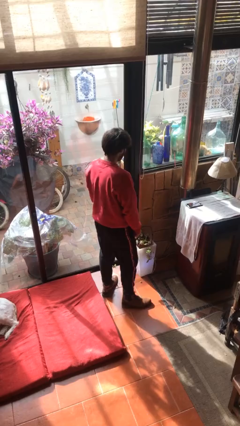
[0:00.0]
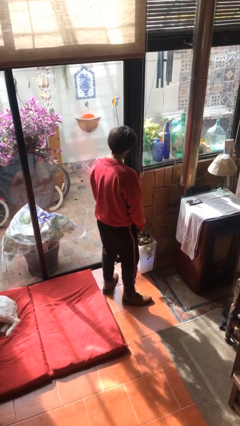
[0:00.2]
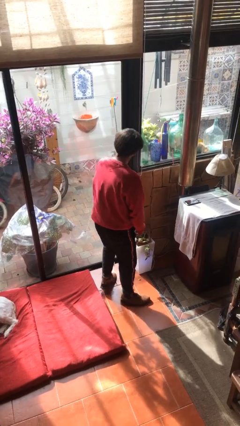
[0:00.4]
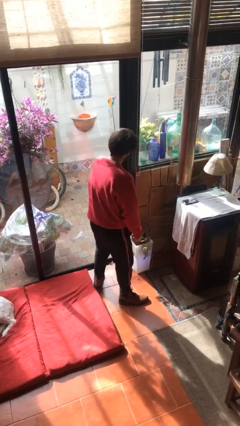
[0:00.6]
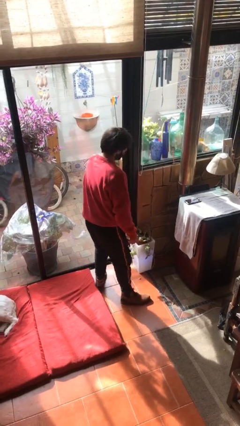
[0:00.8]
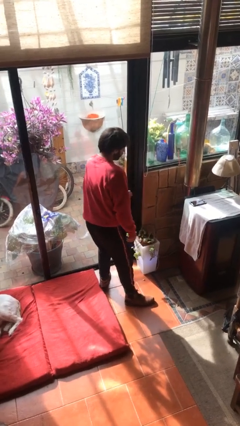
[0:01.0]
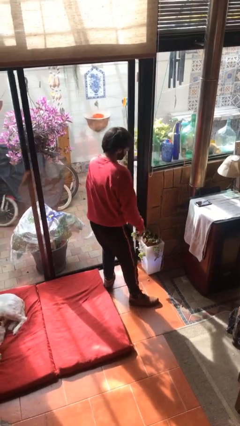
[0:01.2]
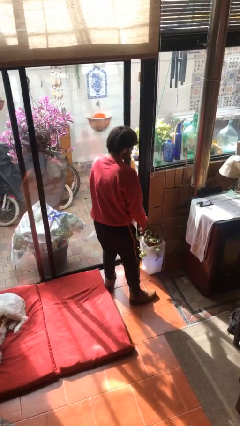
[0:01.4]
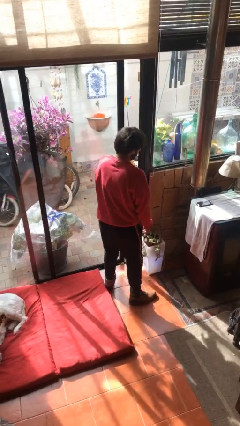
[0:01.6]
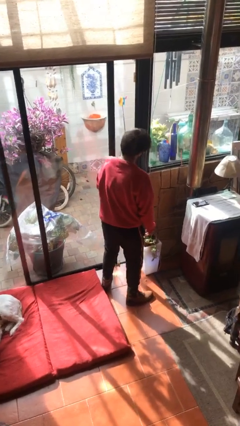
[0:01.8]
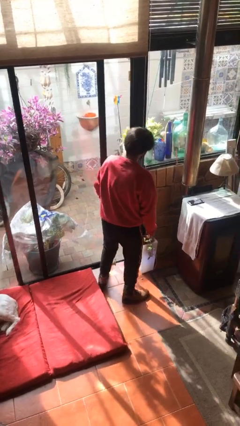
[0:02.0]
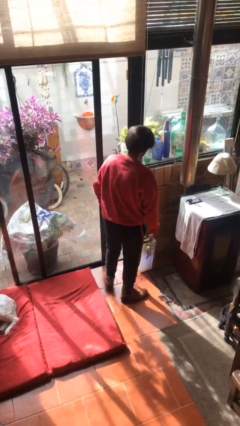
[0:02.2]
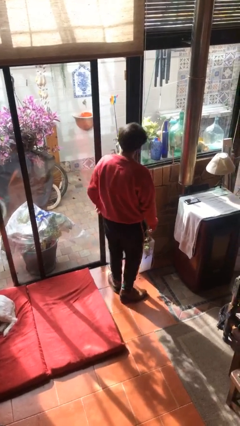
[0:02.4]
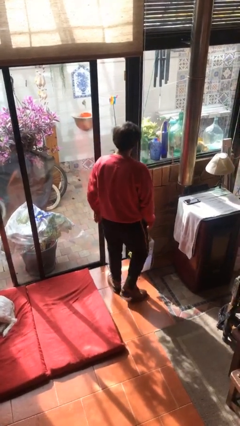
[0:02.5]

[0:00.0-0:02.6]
person opens sliding door

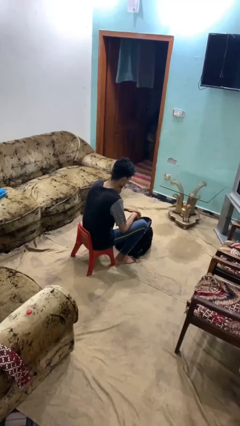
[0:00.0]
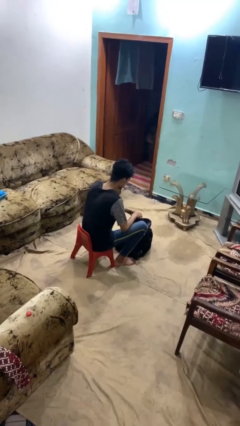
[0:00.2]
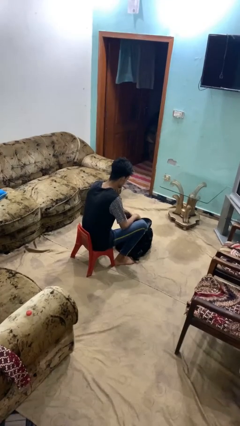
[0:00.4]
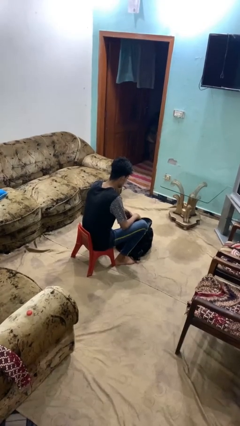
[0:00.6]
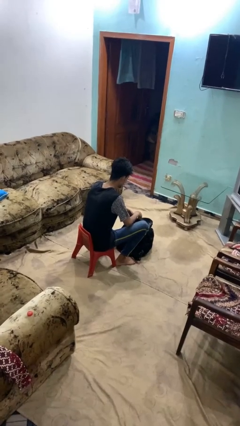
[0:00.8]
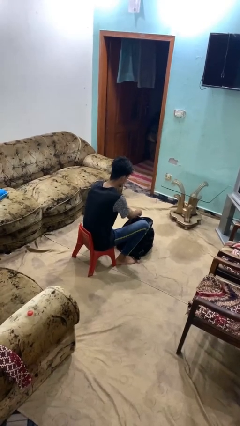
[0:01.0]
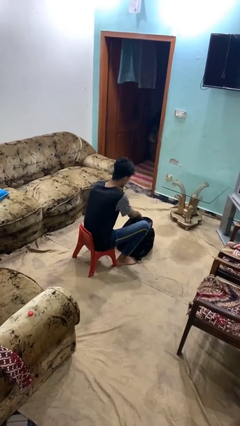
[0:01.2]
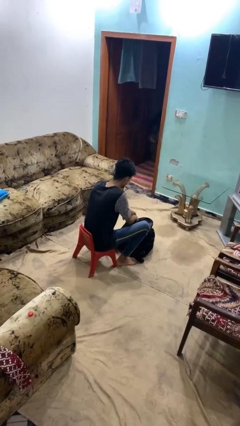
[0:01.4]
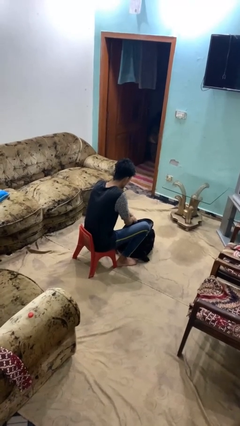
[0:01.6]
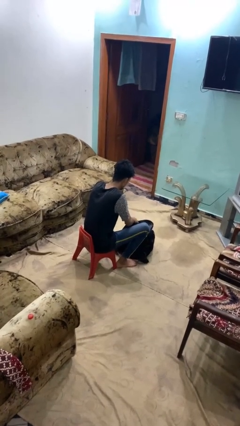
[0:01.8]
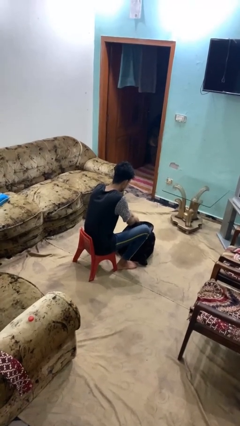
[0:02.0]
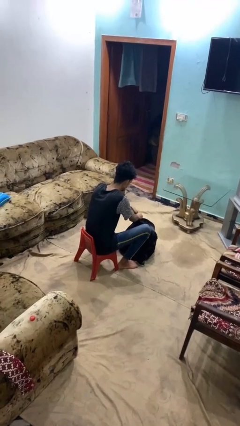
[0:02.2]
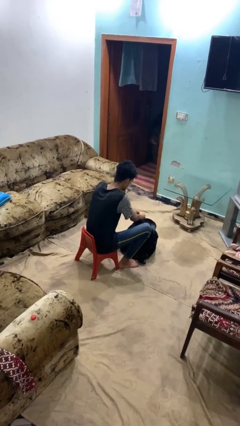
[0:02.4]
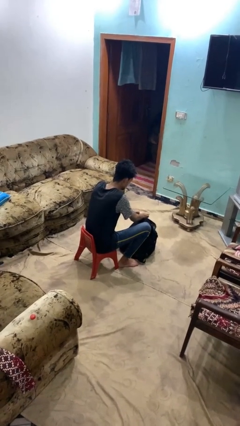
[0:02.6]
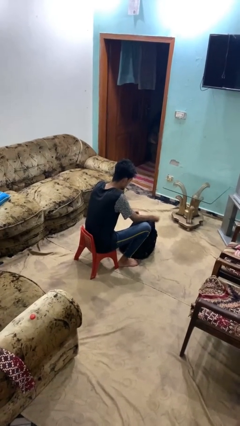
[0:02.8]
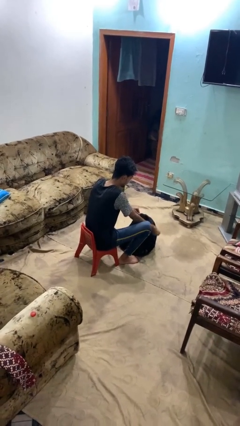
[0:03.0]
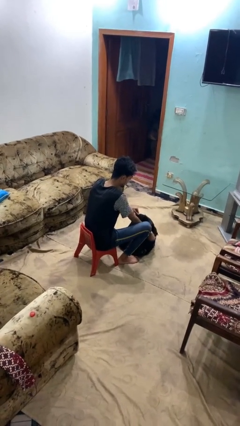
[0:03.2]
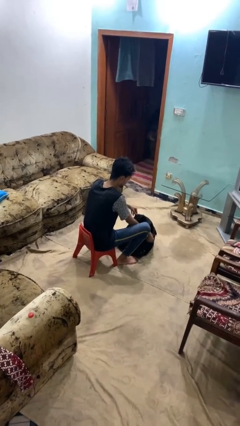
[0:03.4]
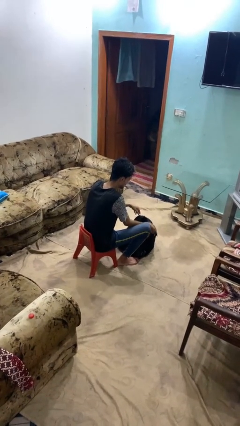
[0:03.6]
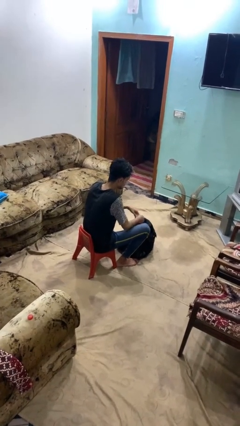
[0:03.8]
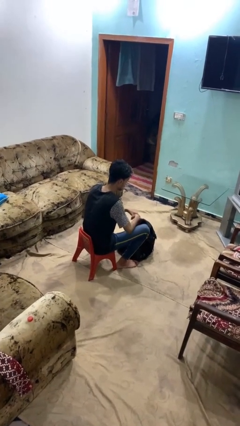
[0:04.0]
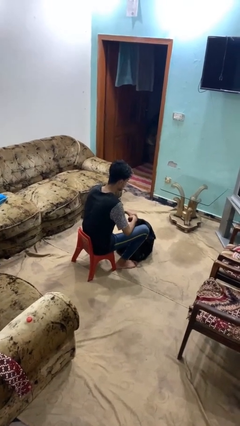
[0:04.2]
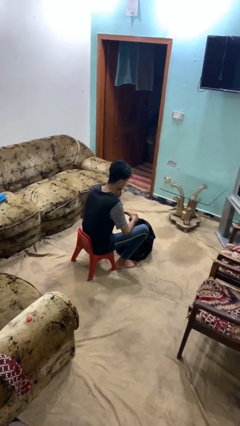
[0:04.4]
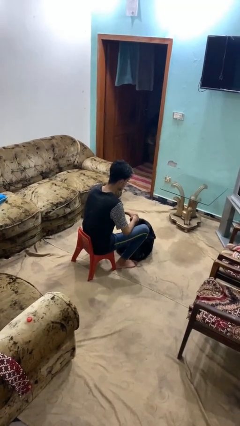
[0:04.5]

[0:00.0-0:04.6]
person takes off backpack

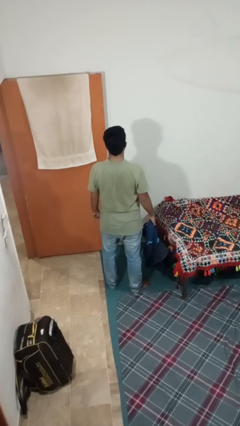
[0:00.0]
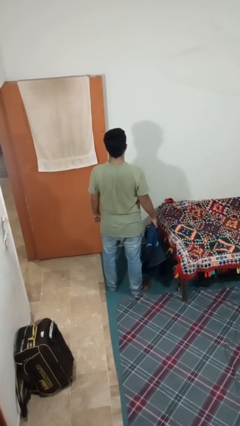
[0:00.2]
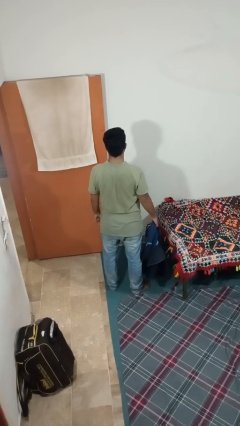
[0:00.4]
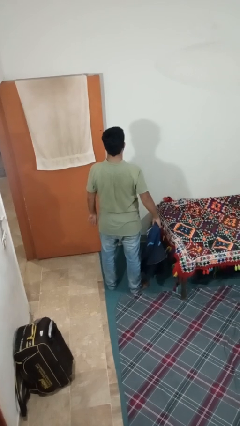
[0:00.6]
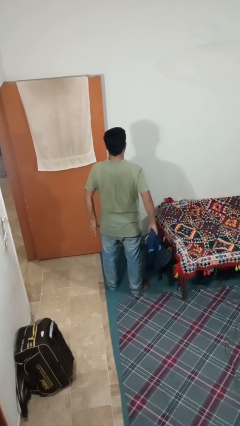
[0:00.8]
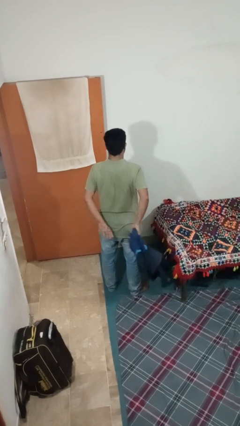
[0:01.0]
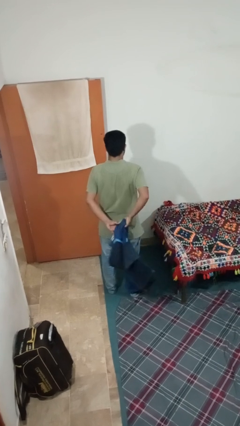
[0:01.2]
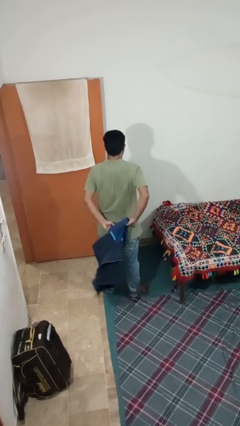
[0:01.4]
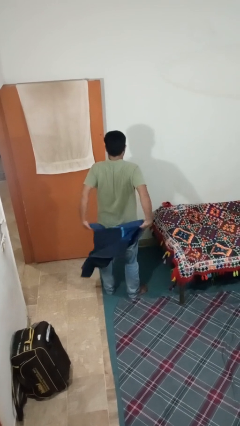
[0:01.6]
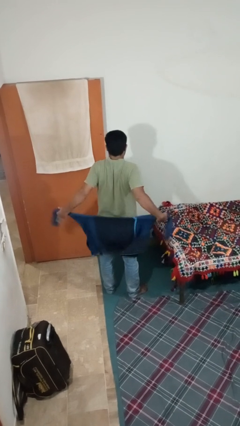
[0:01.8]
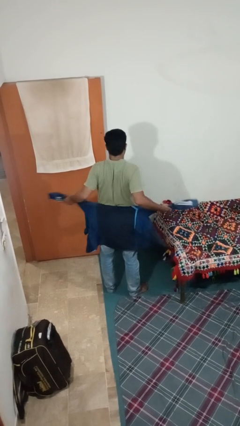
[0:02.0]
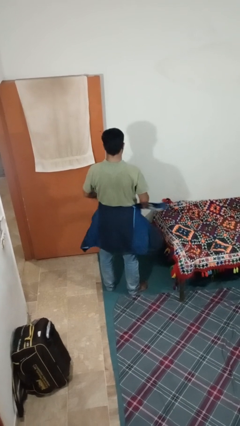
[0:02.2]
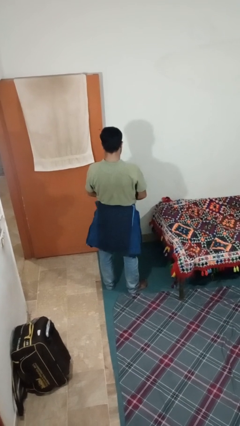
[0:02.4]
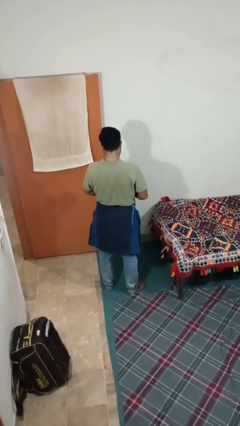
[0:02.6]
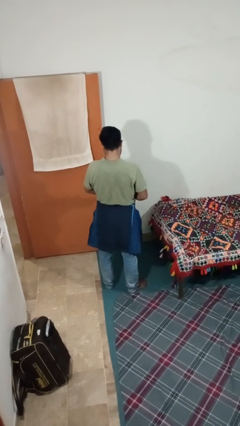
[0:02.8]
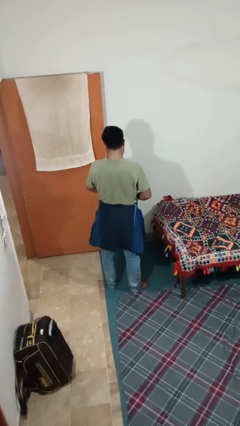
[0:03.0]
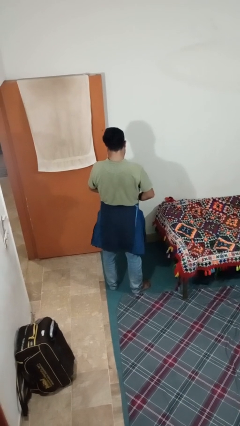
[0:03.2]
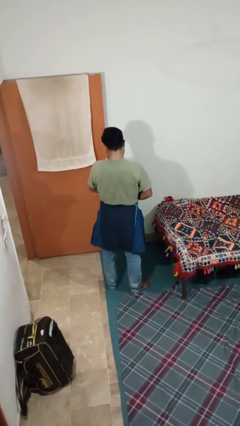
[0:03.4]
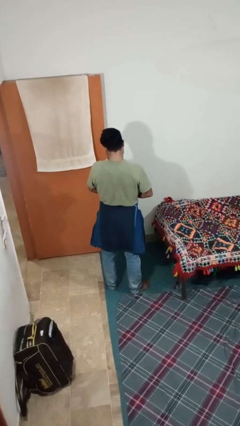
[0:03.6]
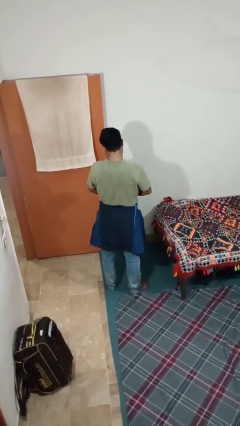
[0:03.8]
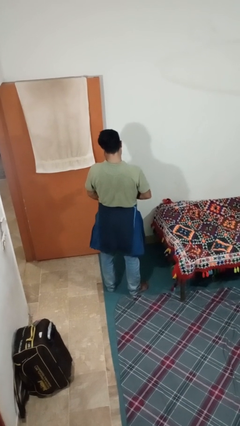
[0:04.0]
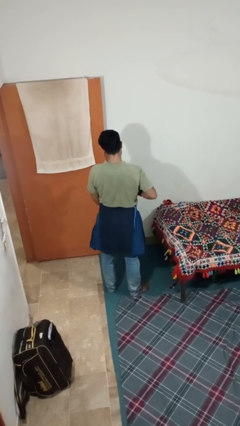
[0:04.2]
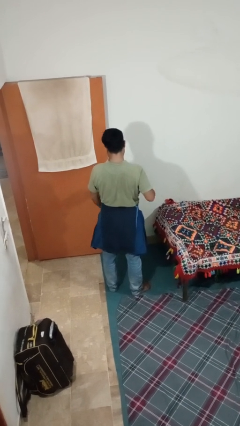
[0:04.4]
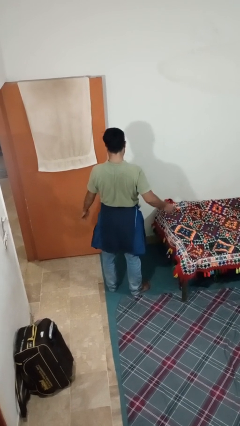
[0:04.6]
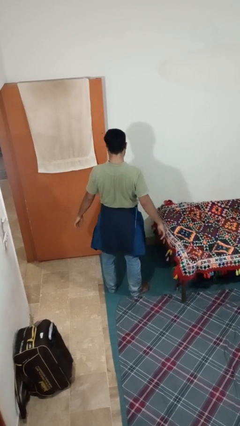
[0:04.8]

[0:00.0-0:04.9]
person ties jacket around waist

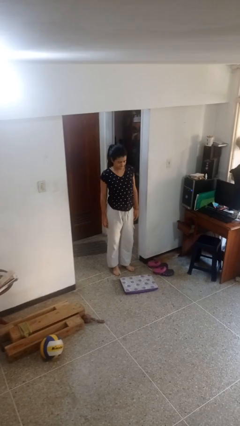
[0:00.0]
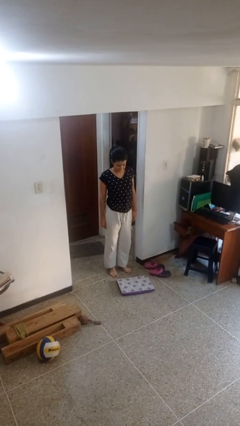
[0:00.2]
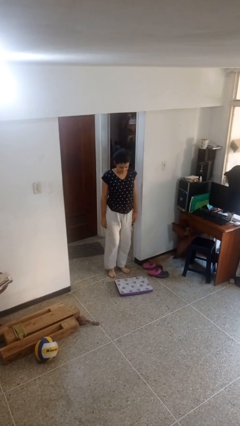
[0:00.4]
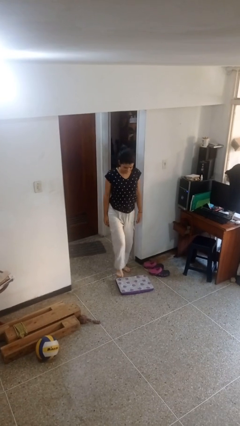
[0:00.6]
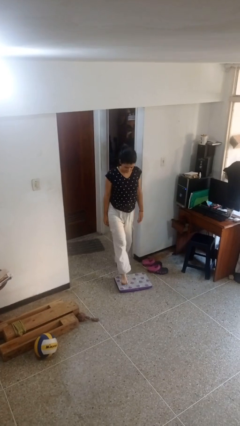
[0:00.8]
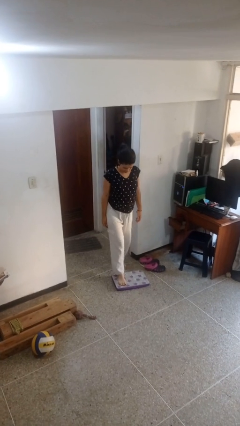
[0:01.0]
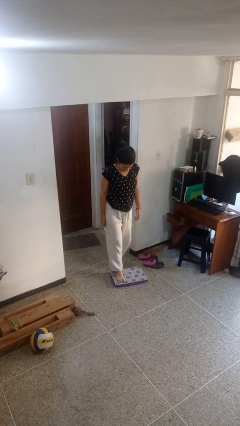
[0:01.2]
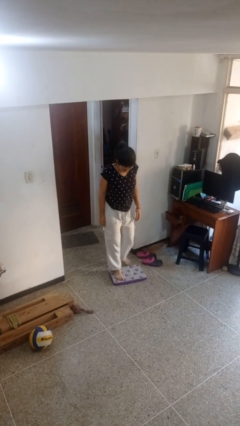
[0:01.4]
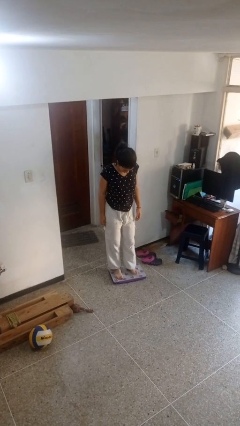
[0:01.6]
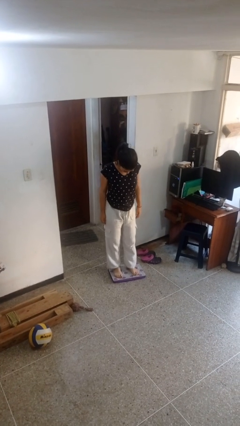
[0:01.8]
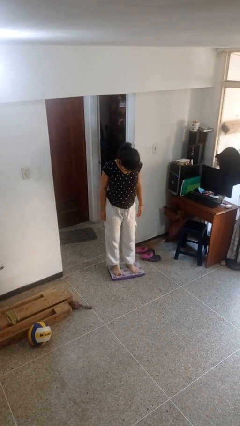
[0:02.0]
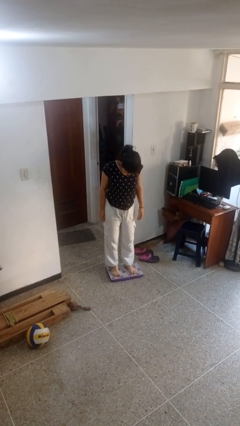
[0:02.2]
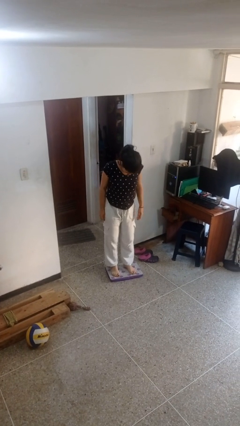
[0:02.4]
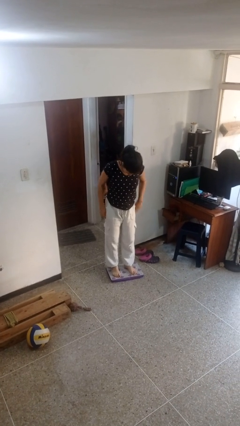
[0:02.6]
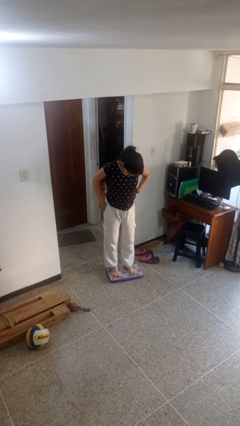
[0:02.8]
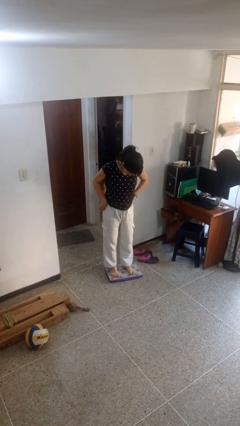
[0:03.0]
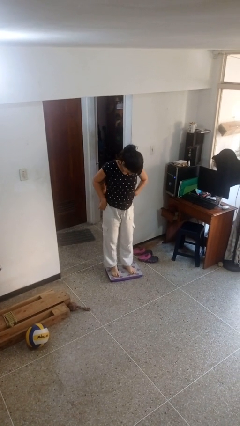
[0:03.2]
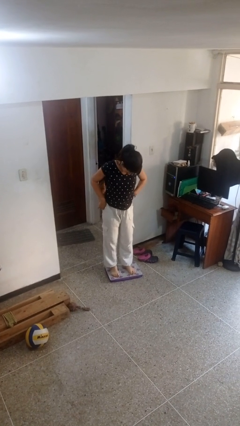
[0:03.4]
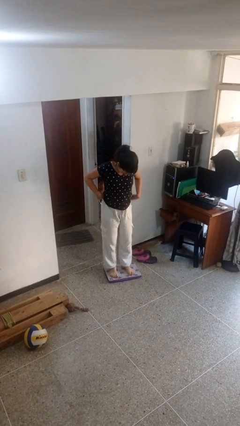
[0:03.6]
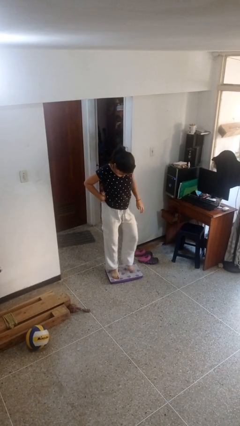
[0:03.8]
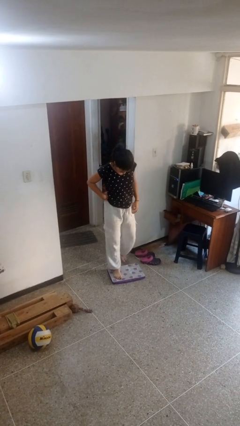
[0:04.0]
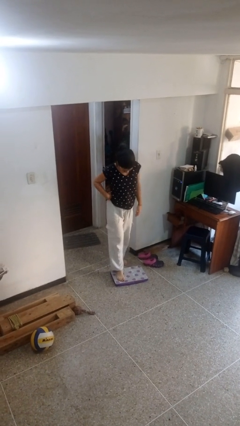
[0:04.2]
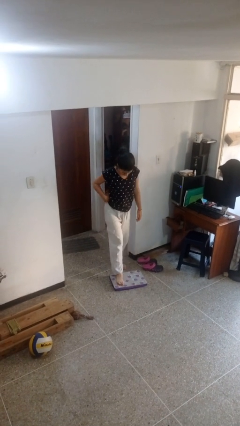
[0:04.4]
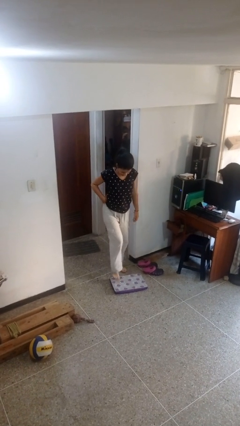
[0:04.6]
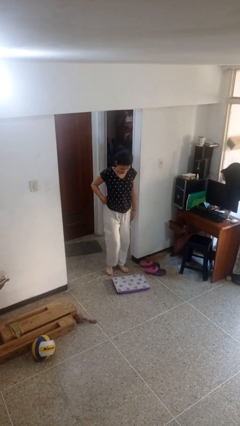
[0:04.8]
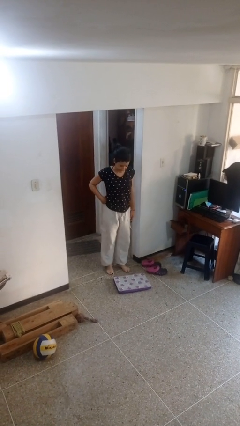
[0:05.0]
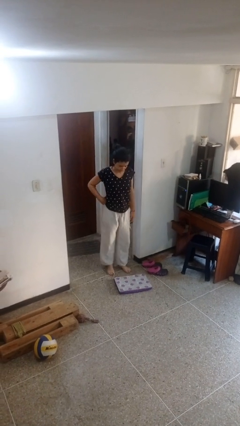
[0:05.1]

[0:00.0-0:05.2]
person uses bodyweight scale

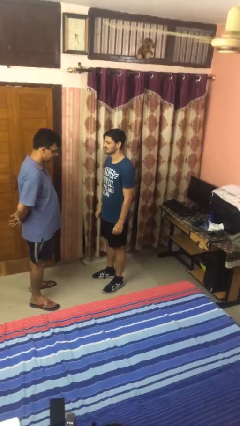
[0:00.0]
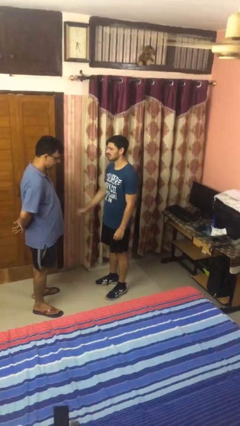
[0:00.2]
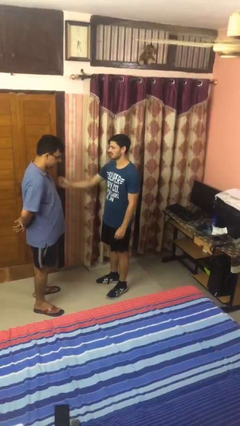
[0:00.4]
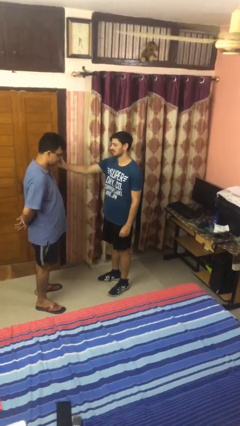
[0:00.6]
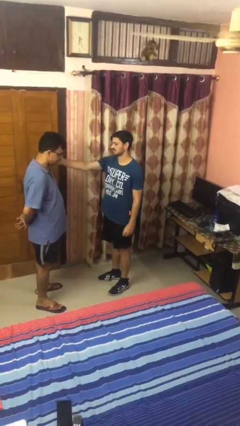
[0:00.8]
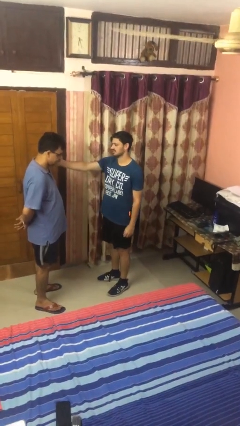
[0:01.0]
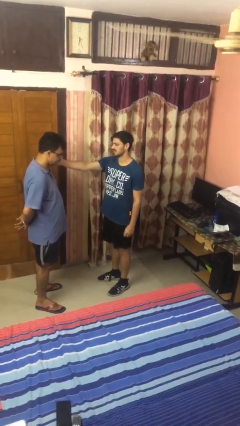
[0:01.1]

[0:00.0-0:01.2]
person touches face of person
